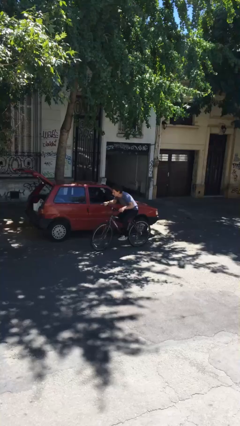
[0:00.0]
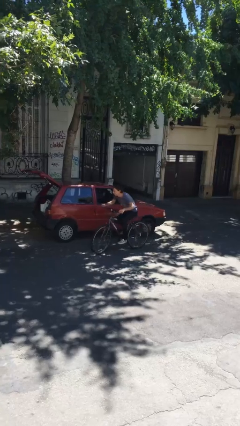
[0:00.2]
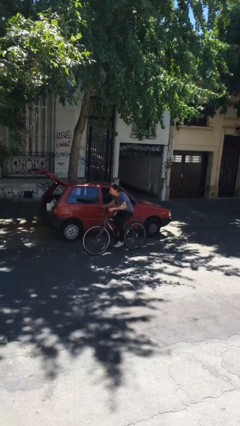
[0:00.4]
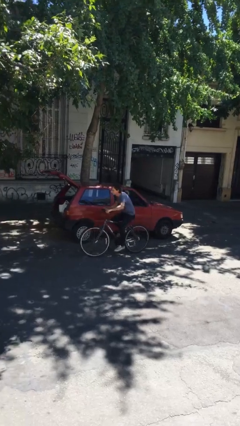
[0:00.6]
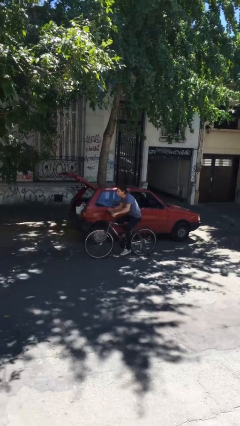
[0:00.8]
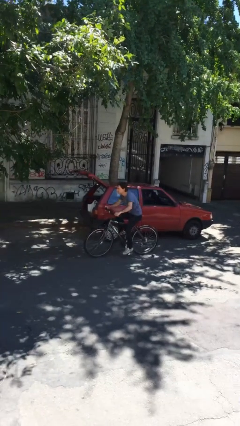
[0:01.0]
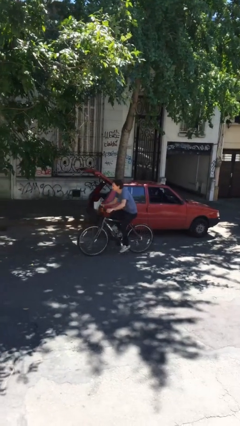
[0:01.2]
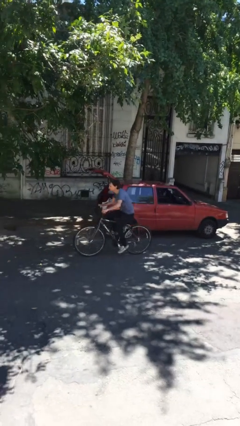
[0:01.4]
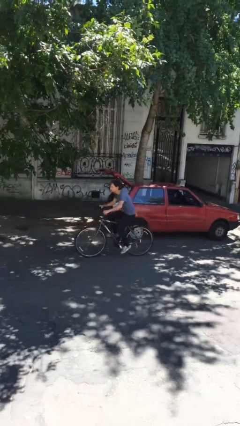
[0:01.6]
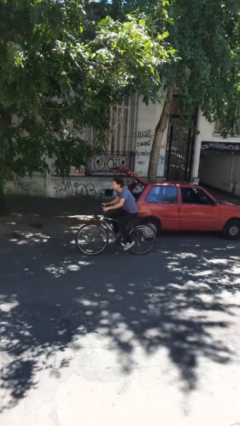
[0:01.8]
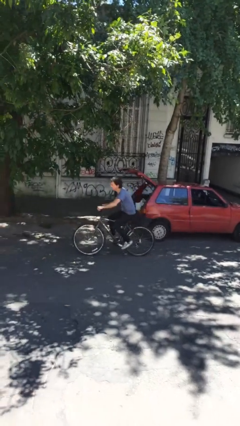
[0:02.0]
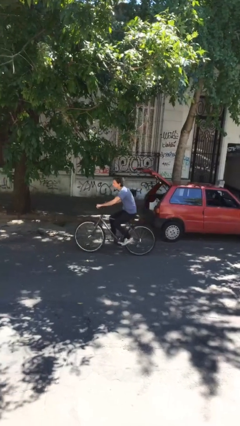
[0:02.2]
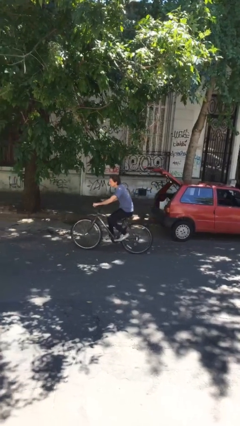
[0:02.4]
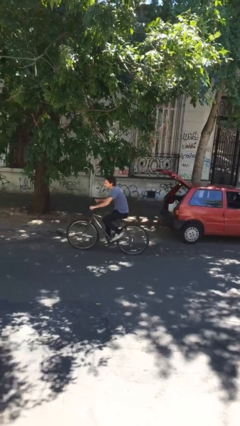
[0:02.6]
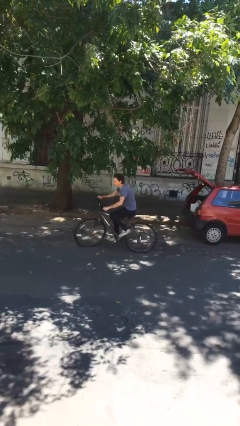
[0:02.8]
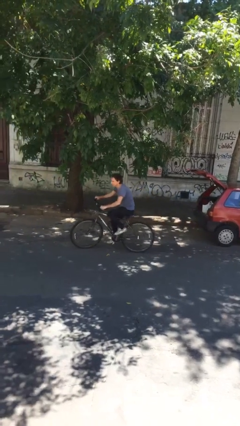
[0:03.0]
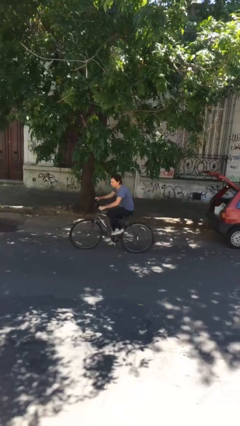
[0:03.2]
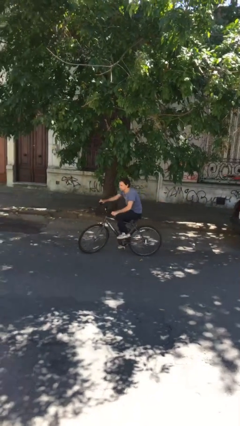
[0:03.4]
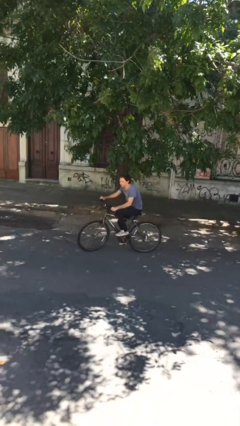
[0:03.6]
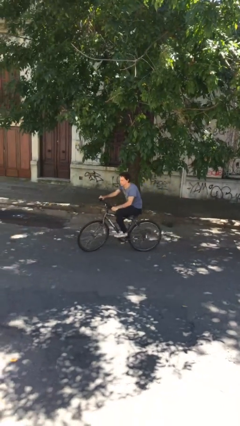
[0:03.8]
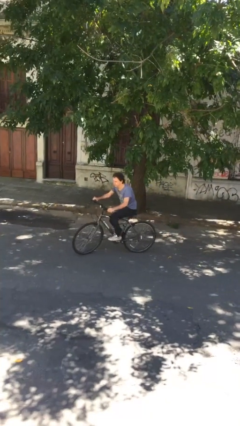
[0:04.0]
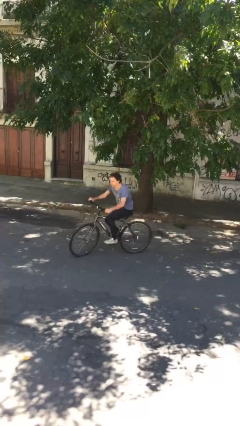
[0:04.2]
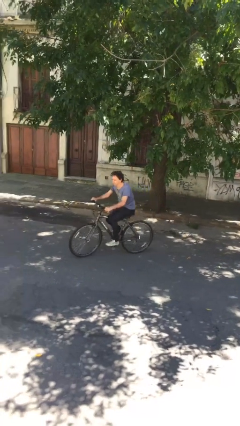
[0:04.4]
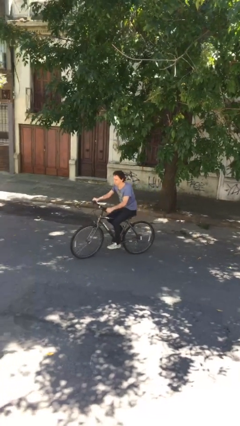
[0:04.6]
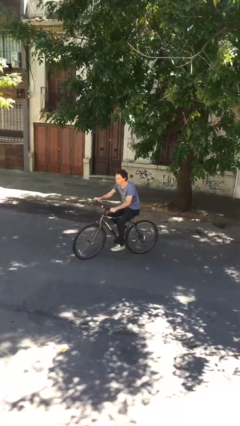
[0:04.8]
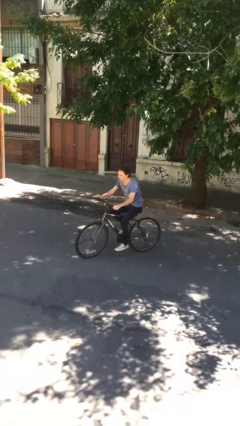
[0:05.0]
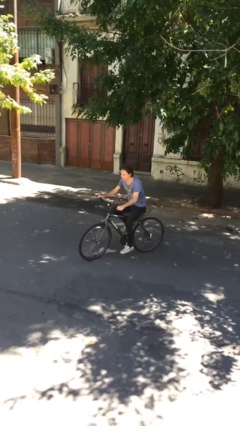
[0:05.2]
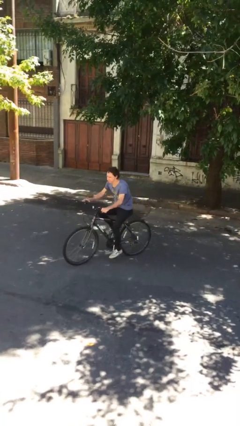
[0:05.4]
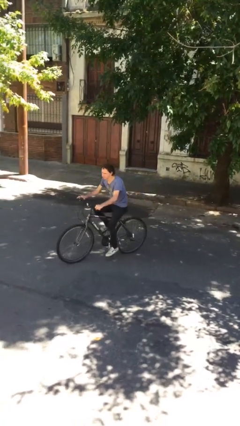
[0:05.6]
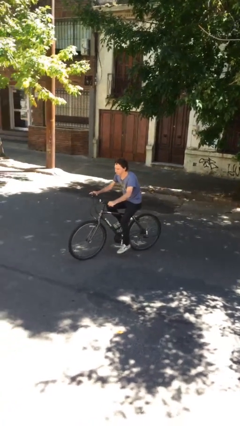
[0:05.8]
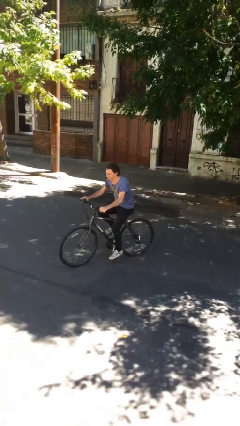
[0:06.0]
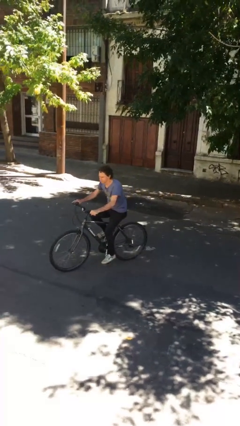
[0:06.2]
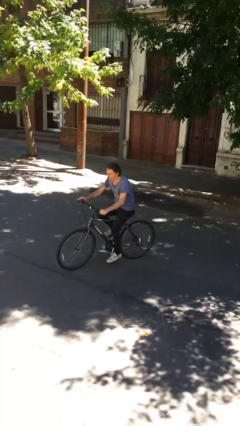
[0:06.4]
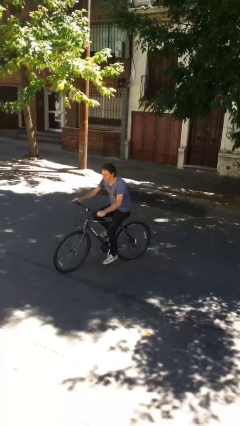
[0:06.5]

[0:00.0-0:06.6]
person rides bicycle

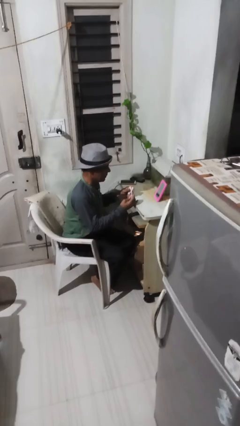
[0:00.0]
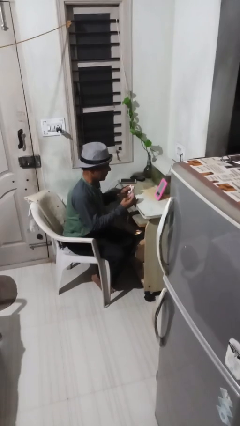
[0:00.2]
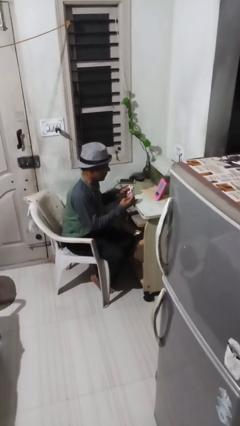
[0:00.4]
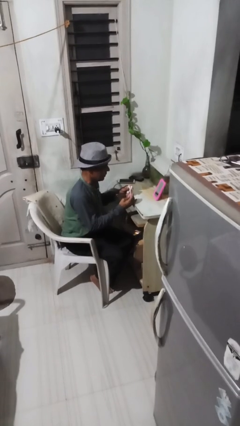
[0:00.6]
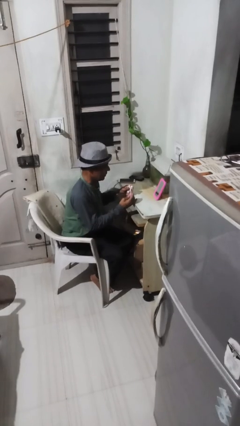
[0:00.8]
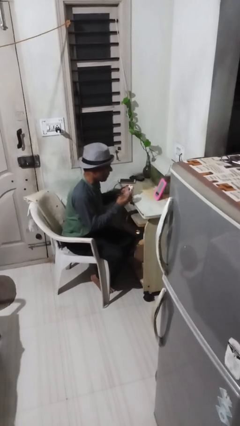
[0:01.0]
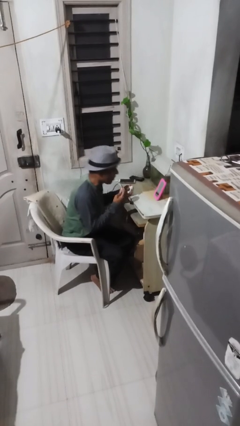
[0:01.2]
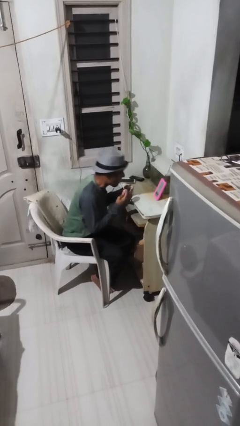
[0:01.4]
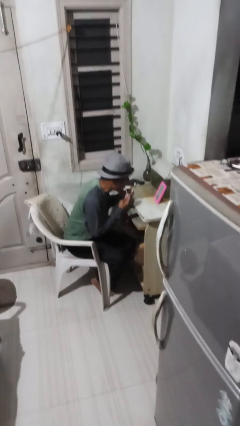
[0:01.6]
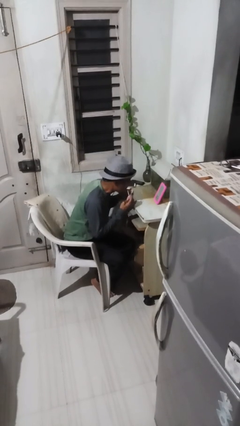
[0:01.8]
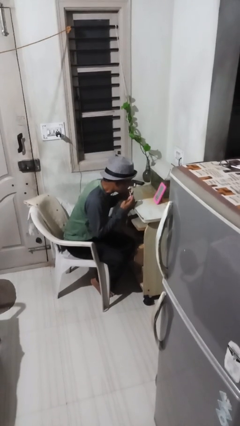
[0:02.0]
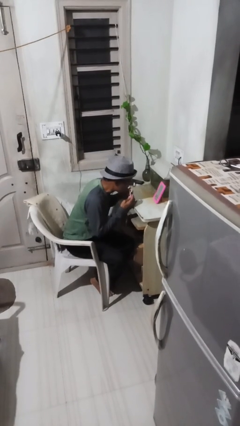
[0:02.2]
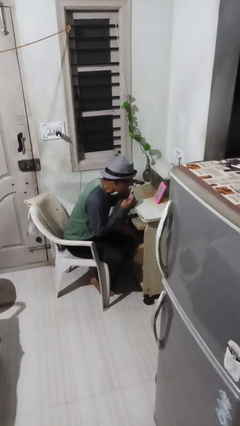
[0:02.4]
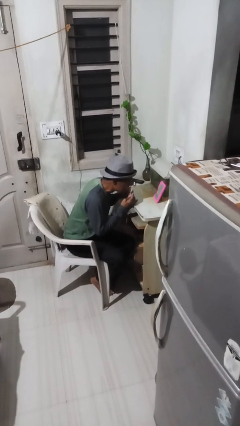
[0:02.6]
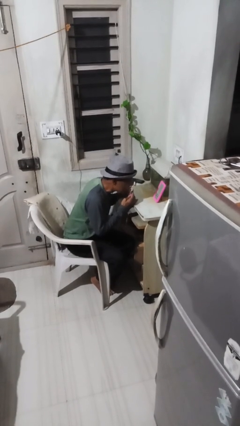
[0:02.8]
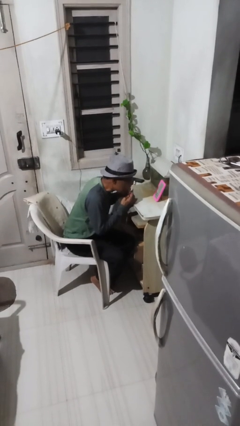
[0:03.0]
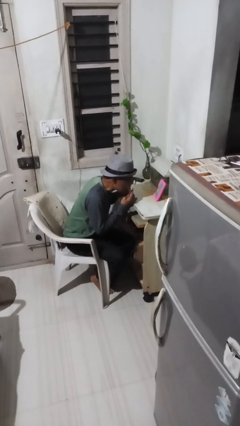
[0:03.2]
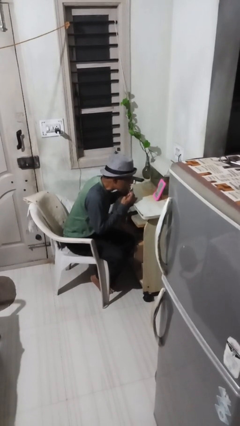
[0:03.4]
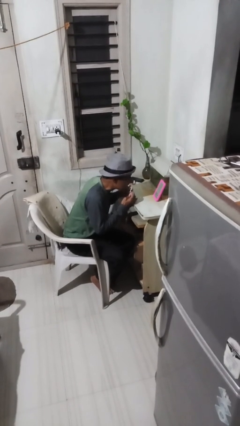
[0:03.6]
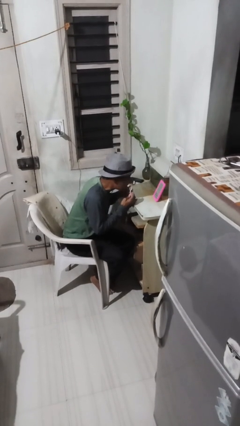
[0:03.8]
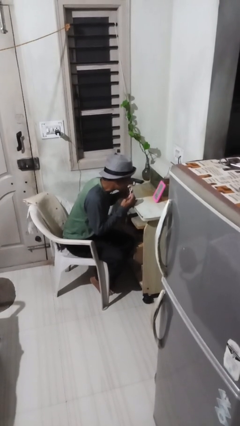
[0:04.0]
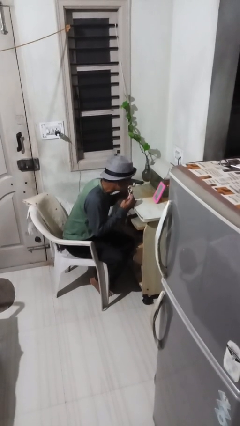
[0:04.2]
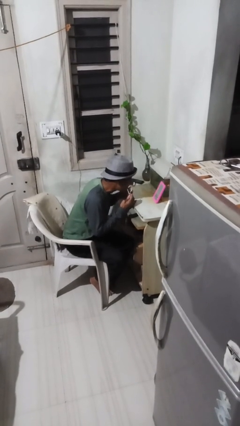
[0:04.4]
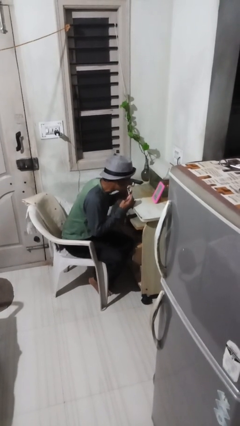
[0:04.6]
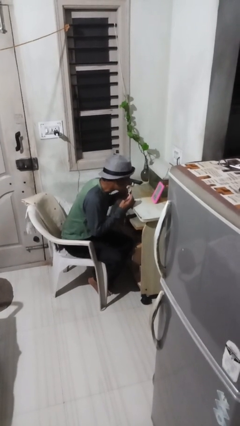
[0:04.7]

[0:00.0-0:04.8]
person applies lip makeup

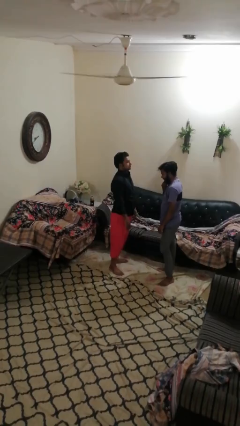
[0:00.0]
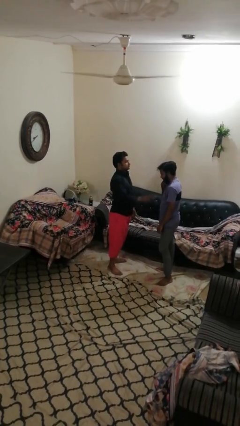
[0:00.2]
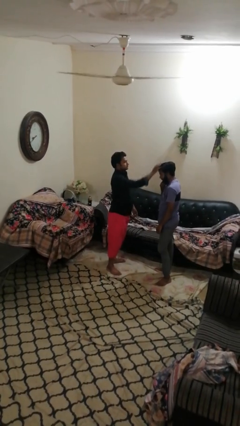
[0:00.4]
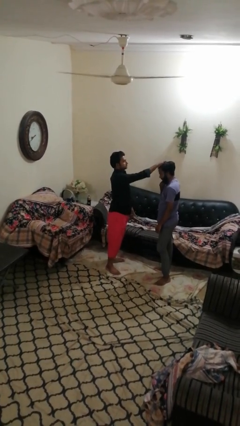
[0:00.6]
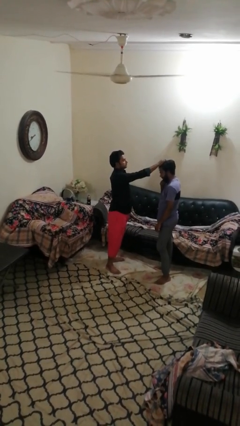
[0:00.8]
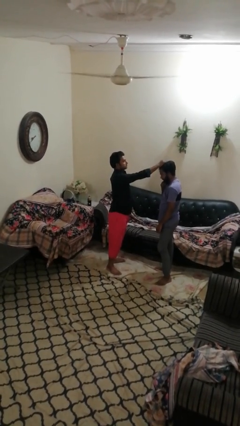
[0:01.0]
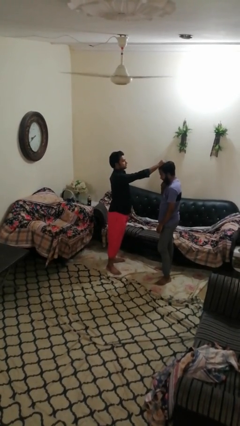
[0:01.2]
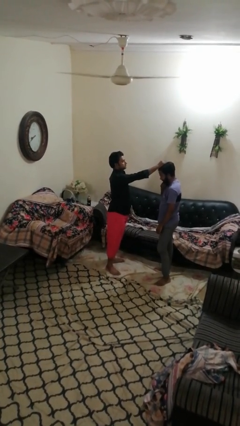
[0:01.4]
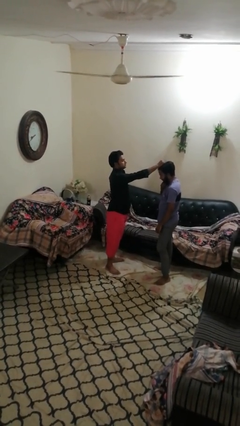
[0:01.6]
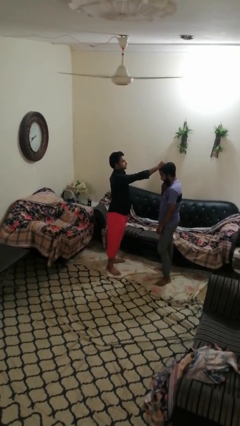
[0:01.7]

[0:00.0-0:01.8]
person grabs person by hair

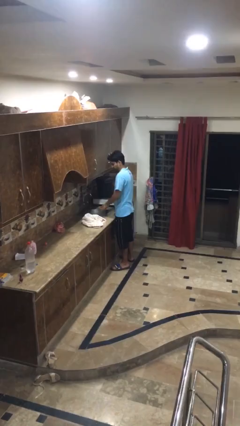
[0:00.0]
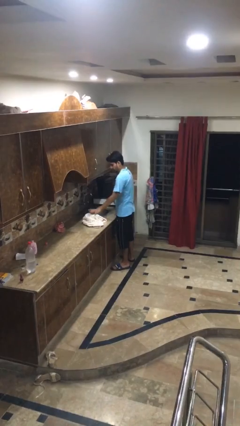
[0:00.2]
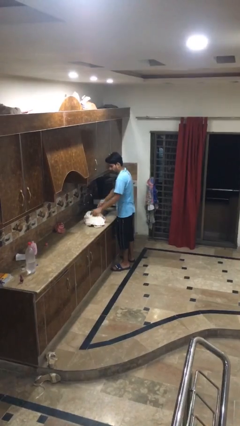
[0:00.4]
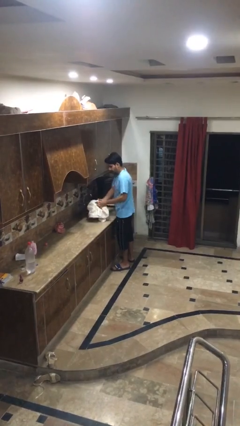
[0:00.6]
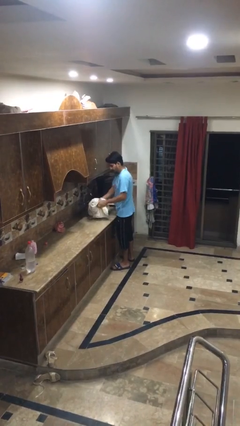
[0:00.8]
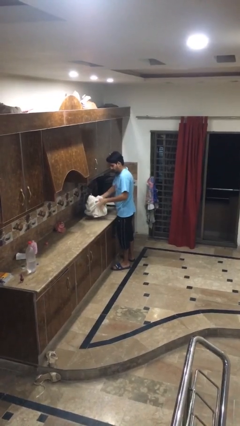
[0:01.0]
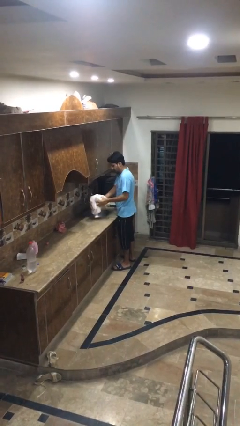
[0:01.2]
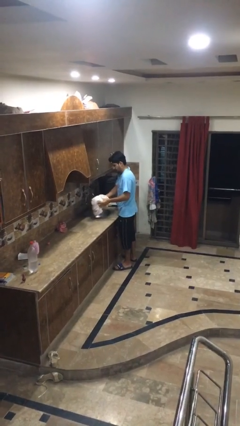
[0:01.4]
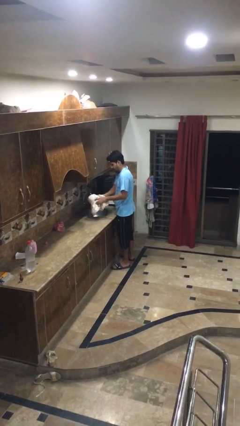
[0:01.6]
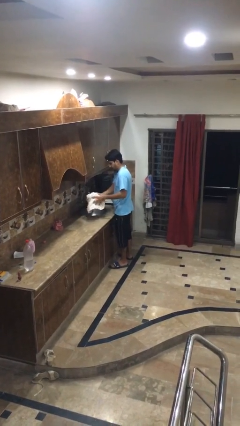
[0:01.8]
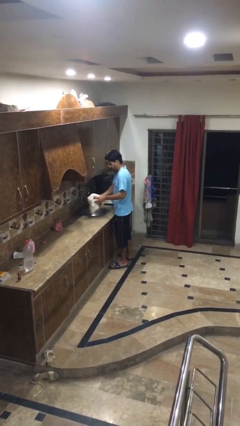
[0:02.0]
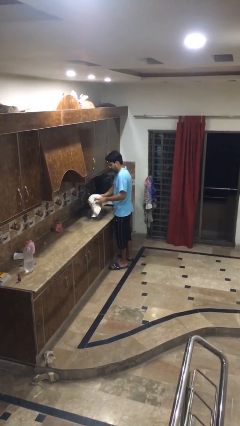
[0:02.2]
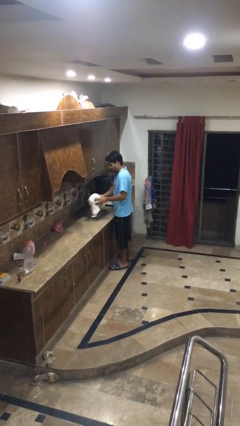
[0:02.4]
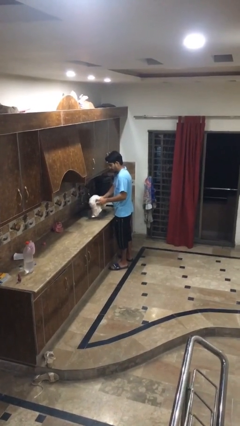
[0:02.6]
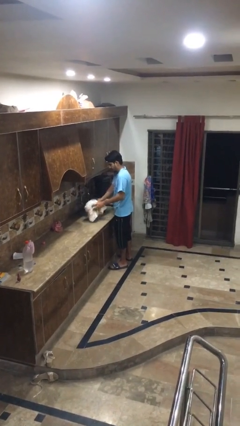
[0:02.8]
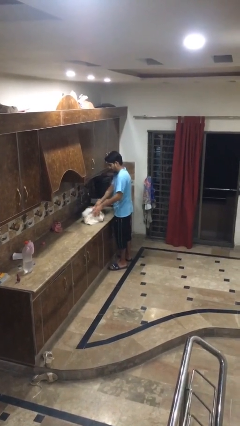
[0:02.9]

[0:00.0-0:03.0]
person dries hands with towel

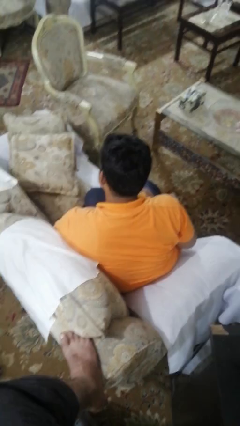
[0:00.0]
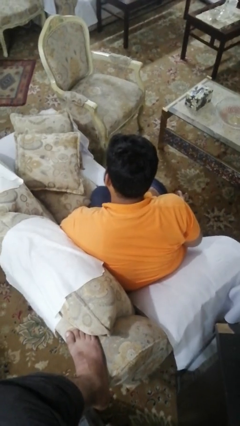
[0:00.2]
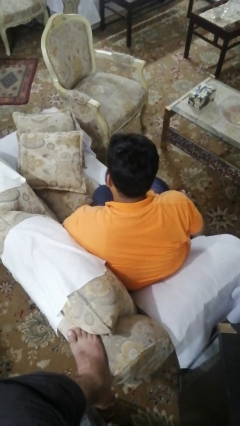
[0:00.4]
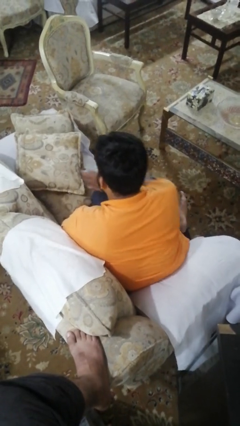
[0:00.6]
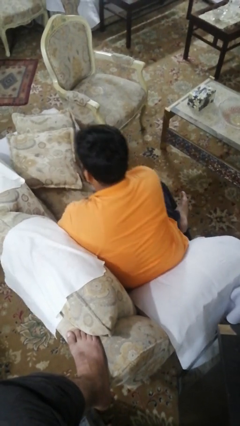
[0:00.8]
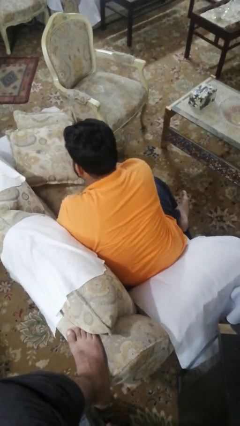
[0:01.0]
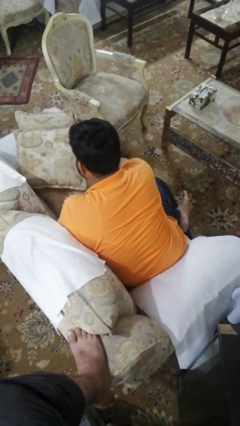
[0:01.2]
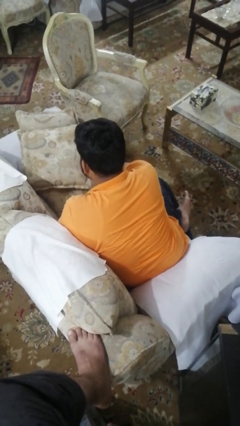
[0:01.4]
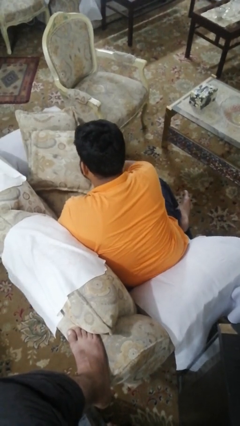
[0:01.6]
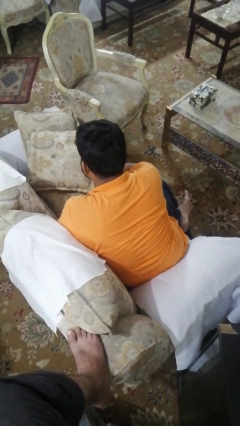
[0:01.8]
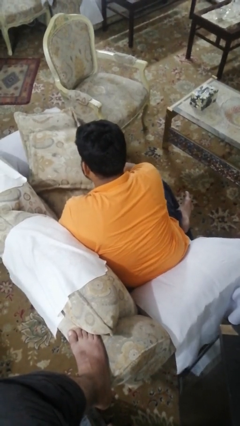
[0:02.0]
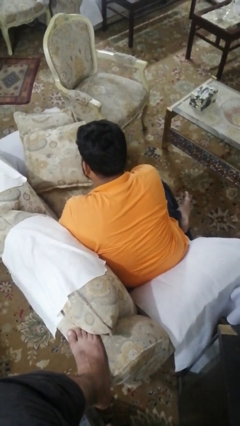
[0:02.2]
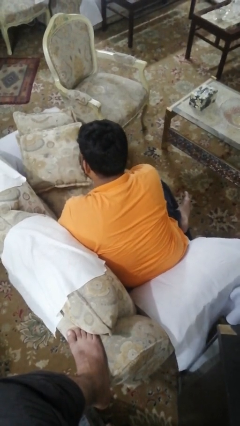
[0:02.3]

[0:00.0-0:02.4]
person searches in couch
